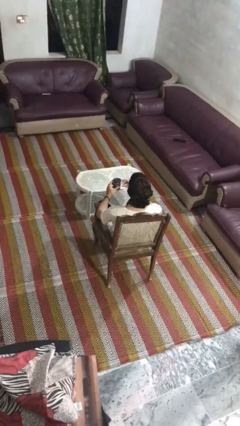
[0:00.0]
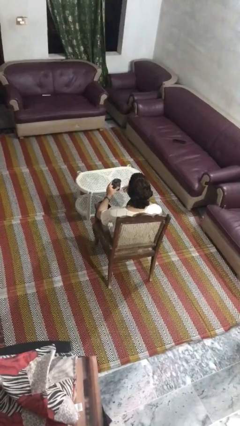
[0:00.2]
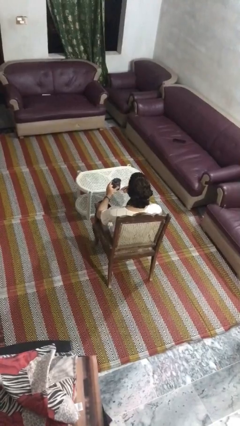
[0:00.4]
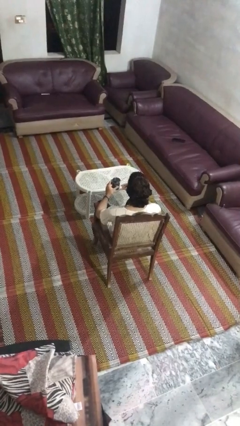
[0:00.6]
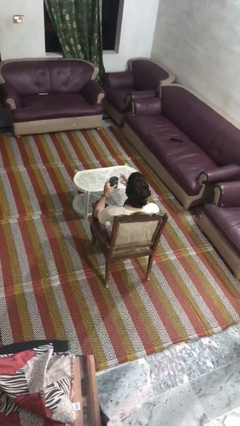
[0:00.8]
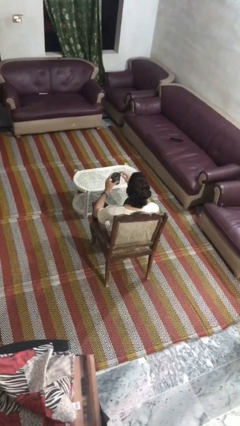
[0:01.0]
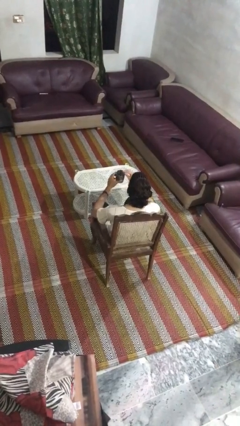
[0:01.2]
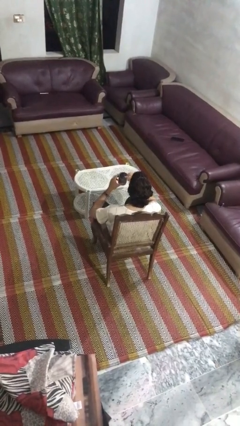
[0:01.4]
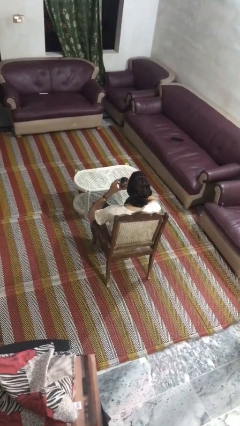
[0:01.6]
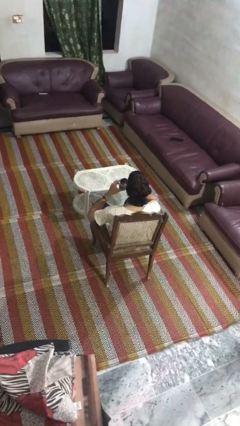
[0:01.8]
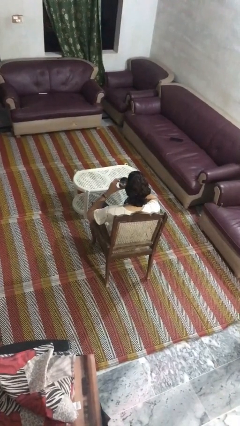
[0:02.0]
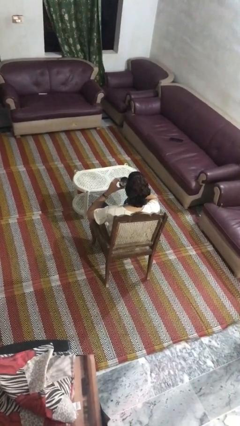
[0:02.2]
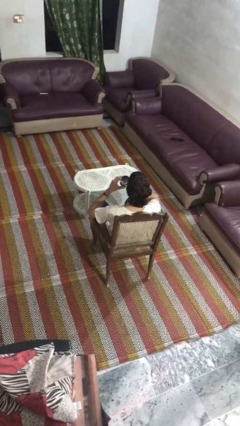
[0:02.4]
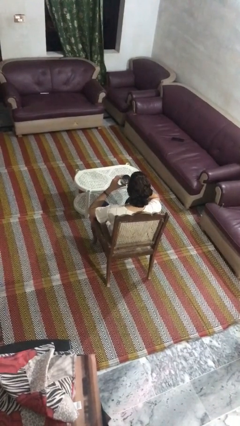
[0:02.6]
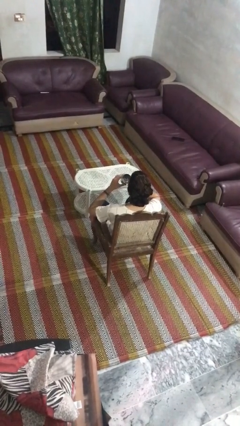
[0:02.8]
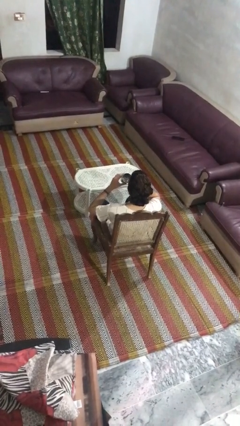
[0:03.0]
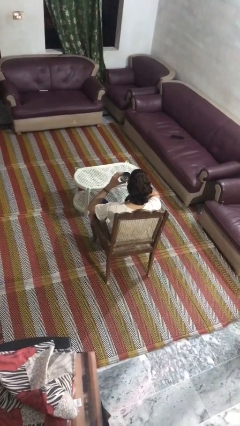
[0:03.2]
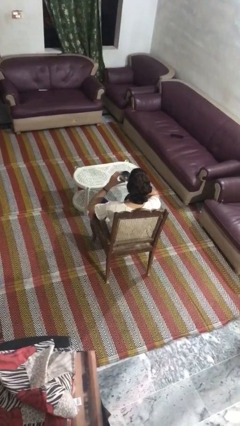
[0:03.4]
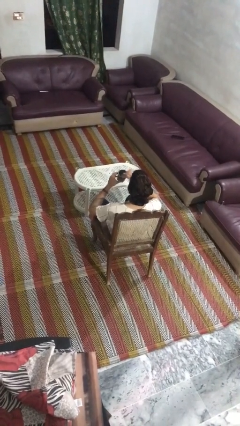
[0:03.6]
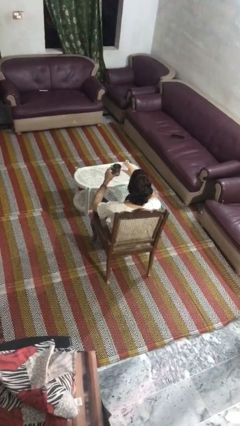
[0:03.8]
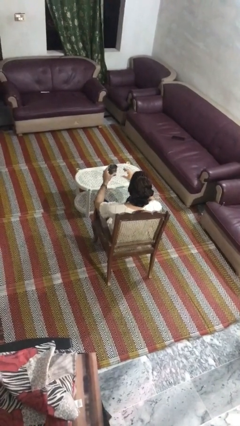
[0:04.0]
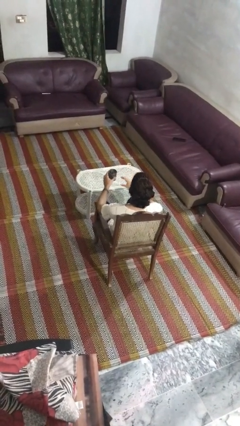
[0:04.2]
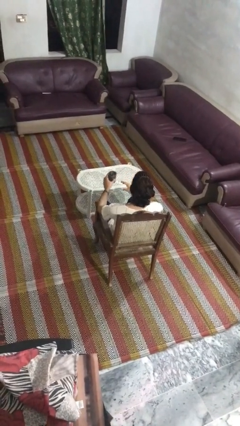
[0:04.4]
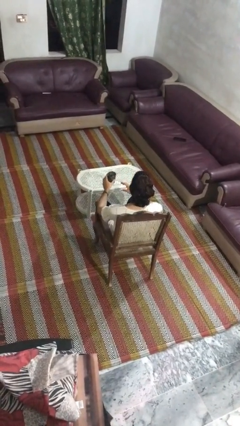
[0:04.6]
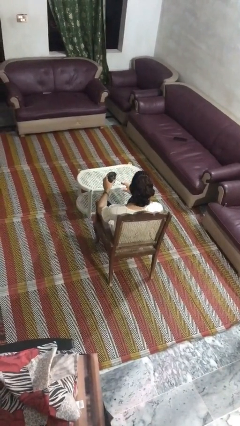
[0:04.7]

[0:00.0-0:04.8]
person drinks from straw

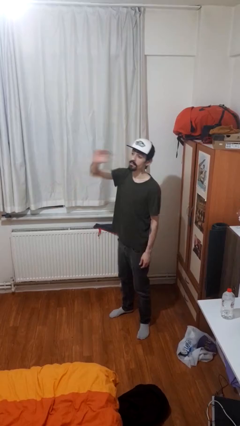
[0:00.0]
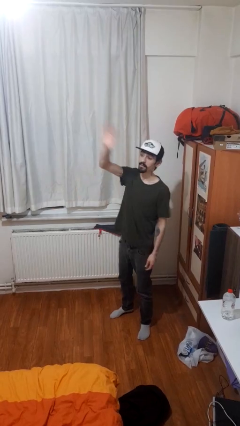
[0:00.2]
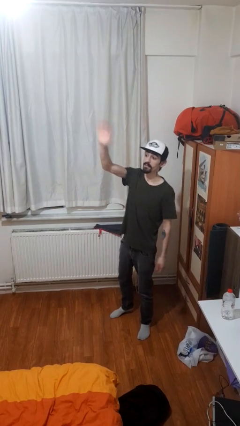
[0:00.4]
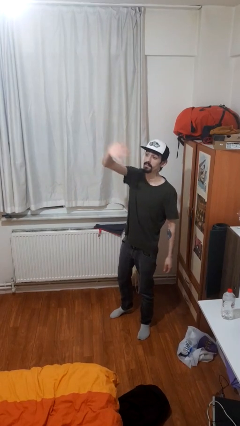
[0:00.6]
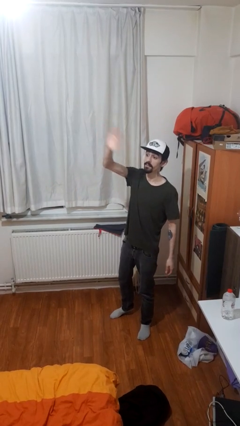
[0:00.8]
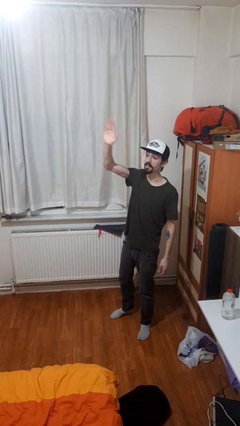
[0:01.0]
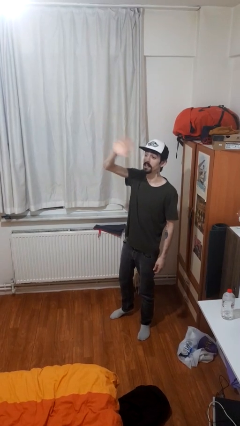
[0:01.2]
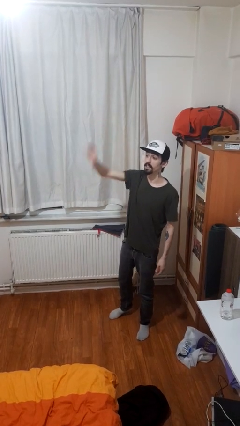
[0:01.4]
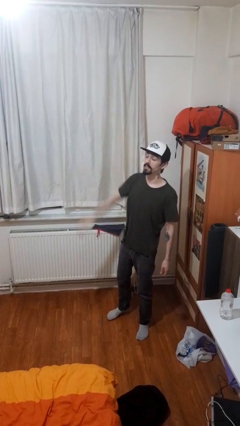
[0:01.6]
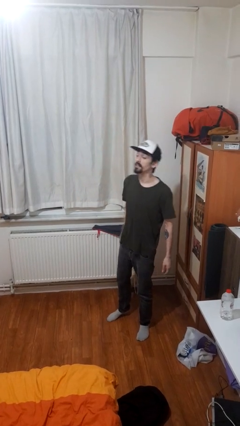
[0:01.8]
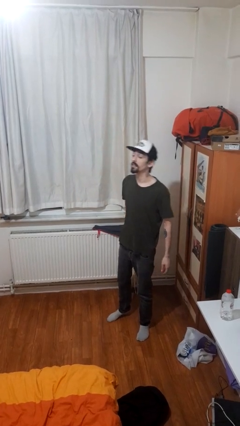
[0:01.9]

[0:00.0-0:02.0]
person waves at person

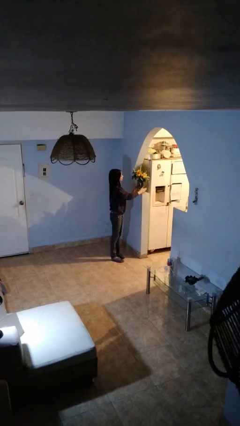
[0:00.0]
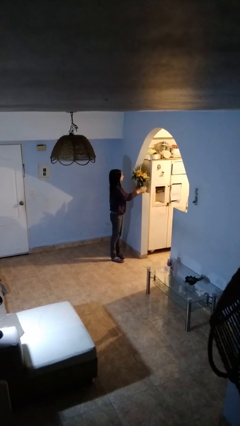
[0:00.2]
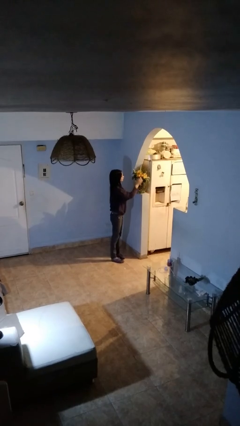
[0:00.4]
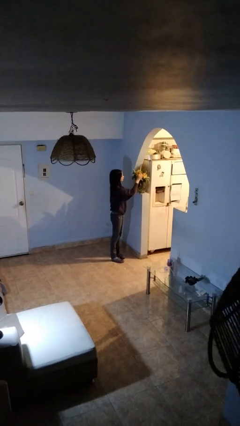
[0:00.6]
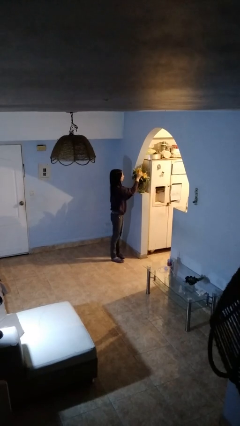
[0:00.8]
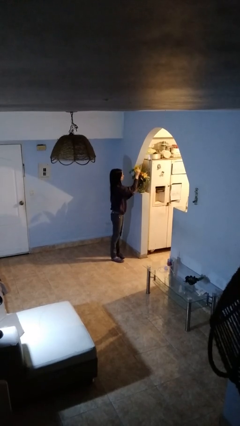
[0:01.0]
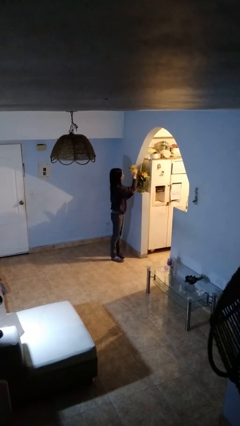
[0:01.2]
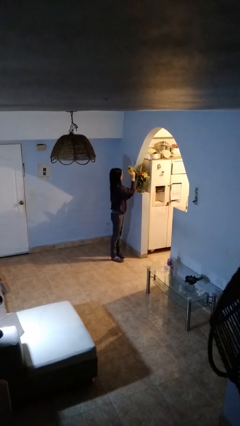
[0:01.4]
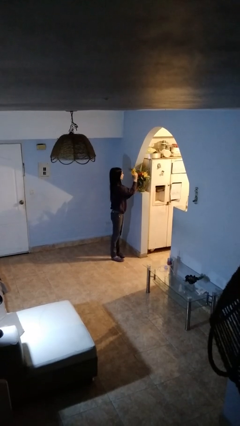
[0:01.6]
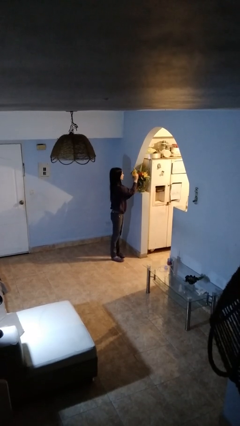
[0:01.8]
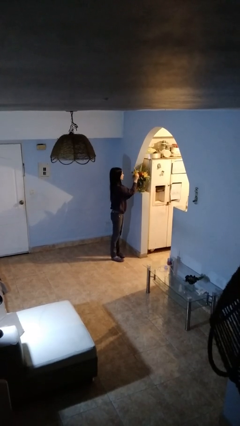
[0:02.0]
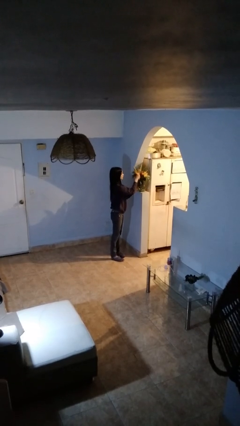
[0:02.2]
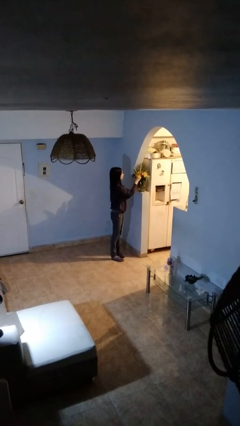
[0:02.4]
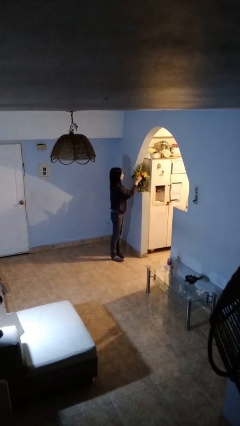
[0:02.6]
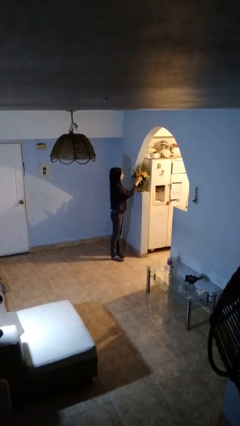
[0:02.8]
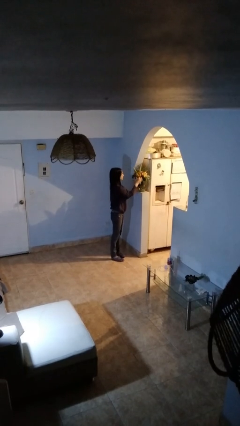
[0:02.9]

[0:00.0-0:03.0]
person arranges flowers in vase

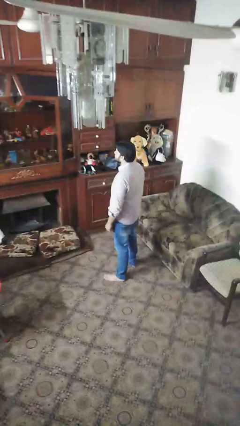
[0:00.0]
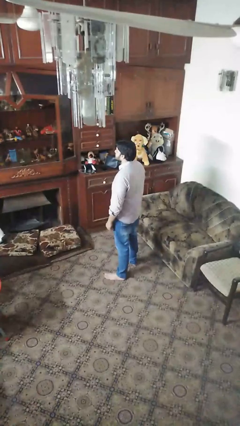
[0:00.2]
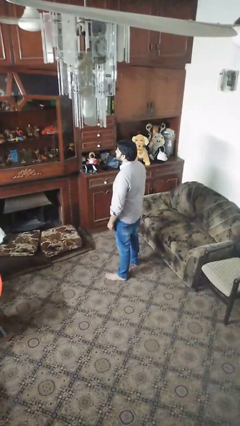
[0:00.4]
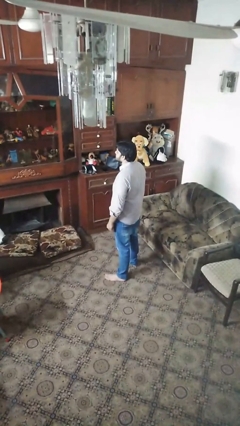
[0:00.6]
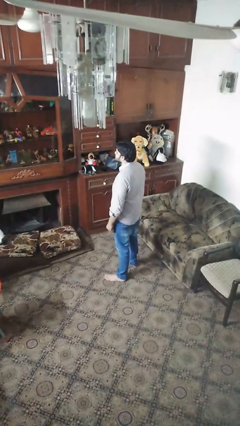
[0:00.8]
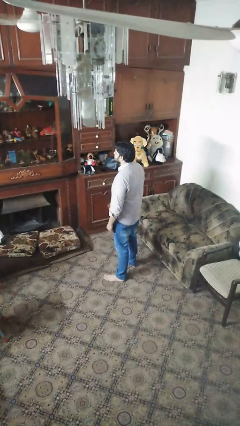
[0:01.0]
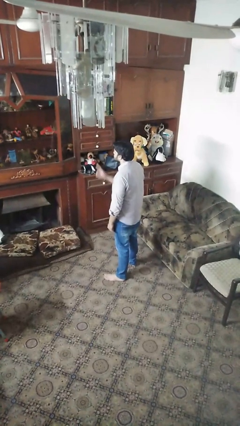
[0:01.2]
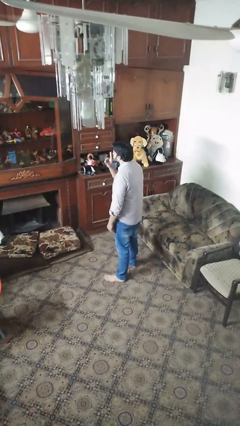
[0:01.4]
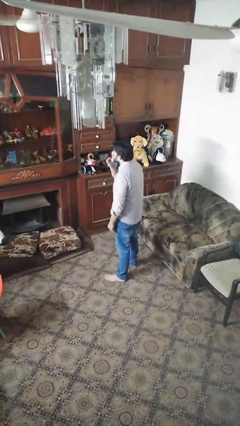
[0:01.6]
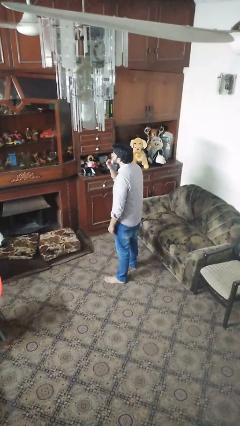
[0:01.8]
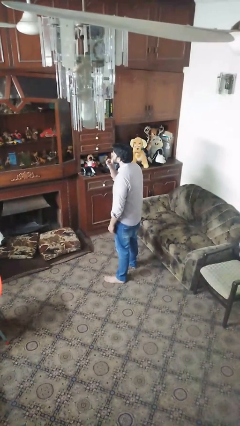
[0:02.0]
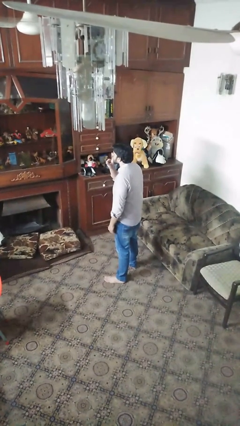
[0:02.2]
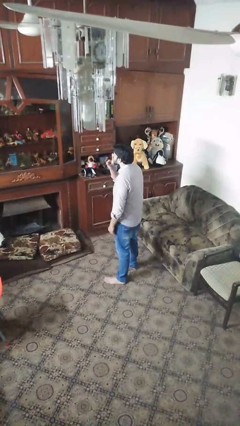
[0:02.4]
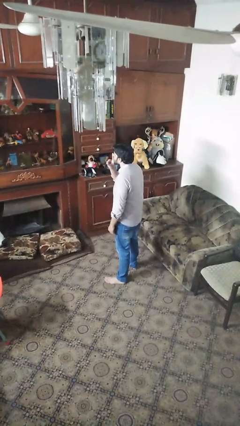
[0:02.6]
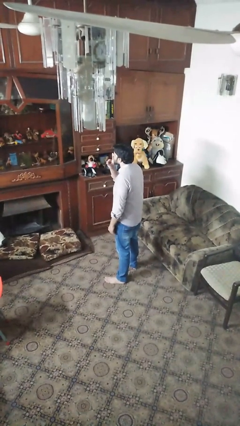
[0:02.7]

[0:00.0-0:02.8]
person gestures be quiet

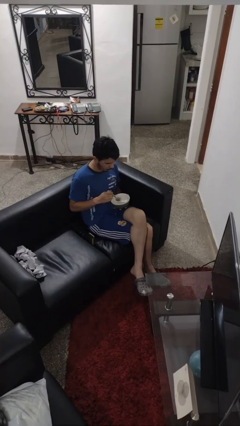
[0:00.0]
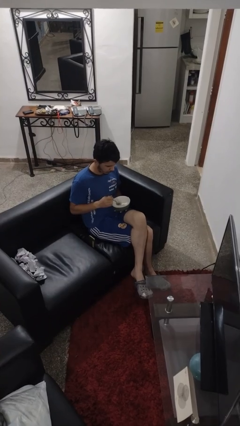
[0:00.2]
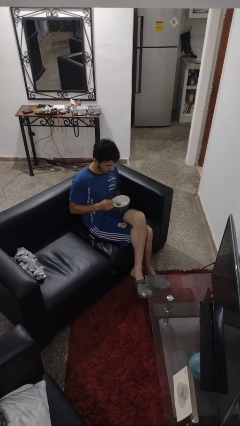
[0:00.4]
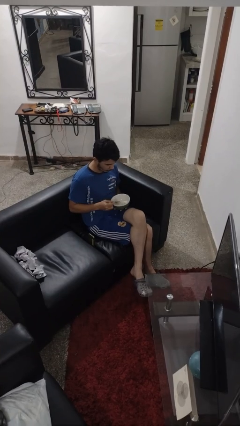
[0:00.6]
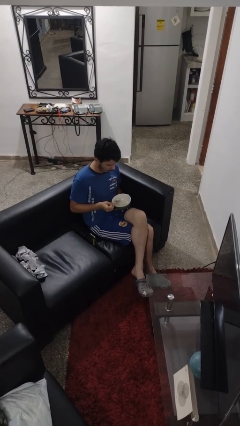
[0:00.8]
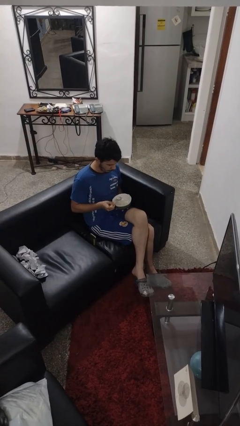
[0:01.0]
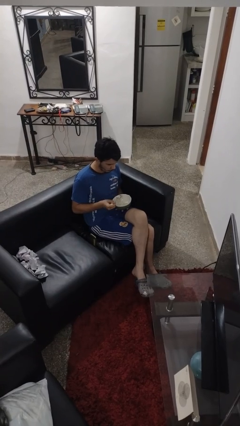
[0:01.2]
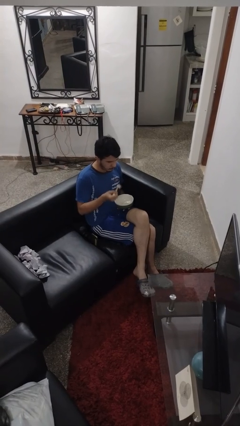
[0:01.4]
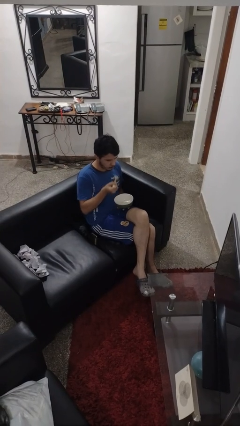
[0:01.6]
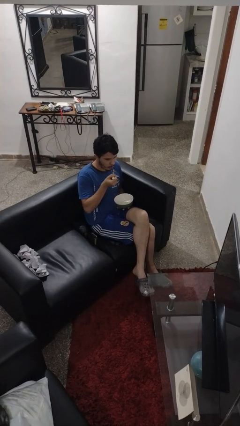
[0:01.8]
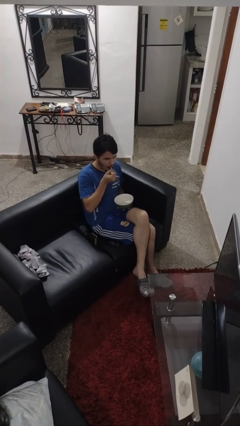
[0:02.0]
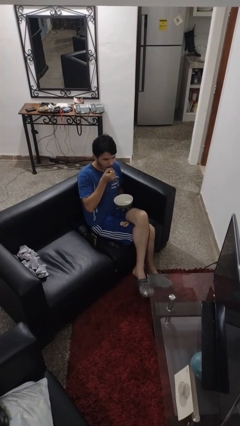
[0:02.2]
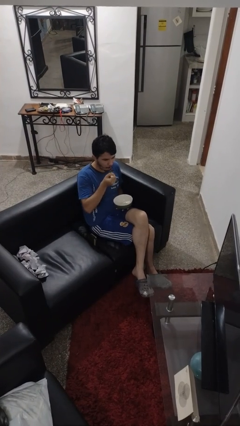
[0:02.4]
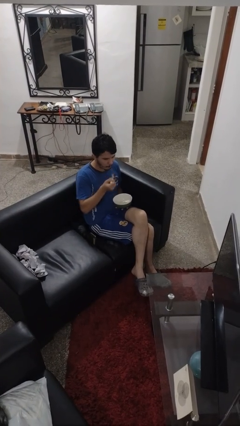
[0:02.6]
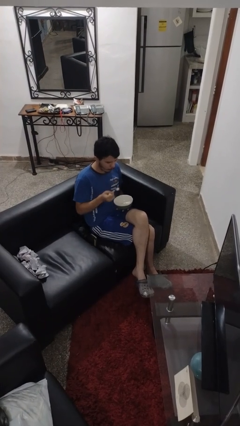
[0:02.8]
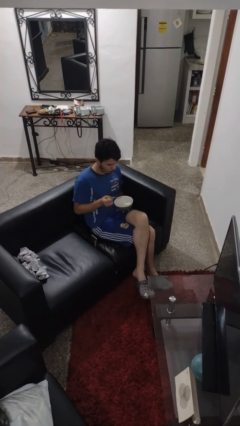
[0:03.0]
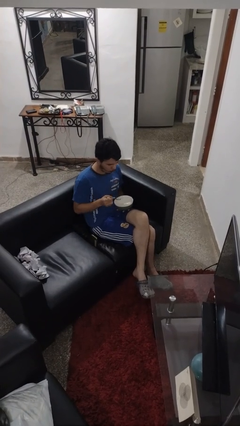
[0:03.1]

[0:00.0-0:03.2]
person eats with utensil

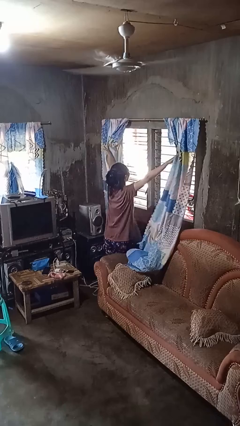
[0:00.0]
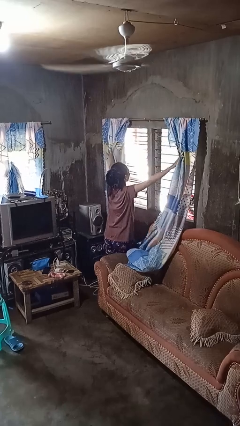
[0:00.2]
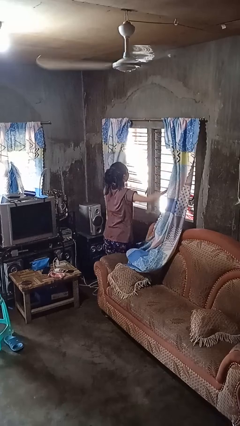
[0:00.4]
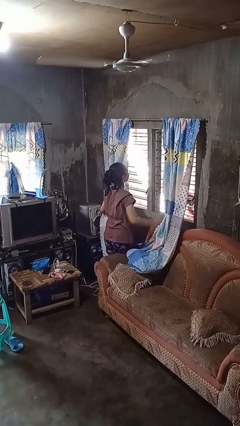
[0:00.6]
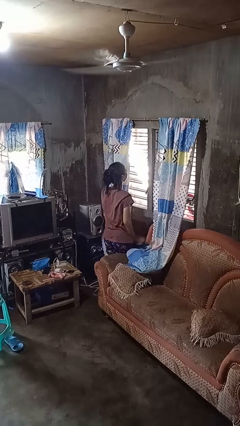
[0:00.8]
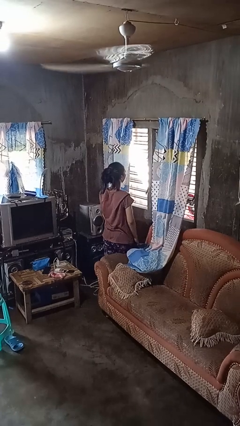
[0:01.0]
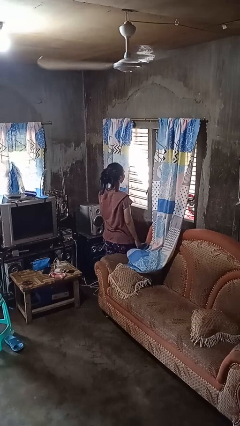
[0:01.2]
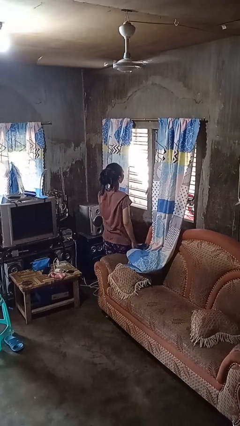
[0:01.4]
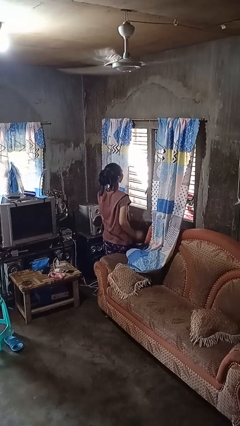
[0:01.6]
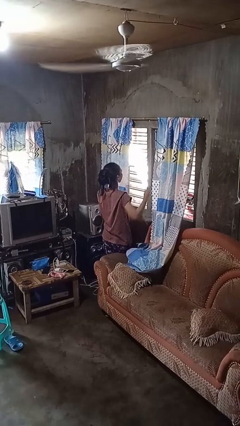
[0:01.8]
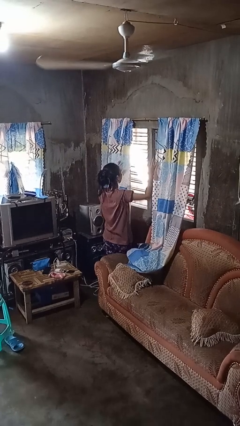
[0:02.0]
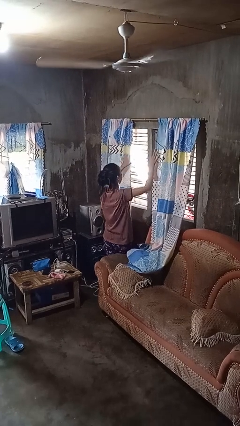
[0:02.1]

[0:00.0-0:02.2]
person opens curtains
